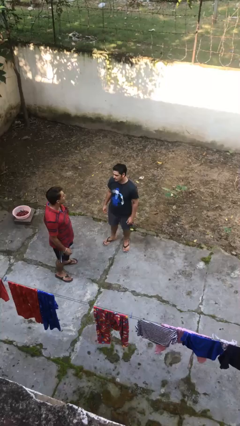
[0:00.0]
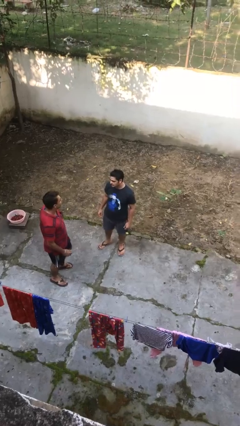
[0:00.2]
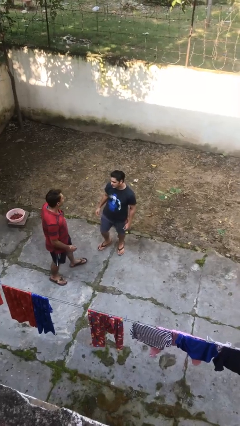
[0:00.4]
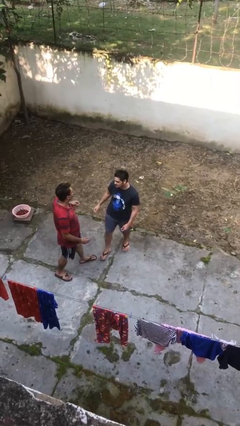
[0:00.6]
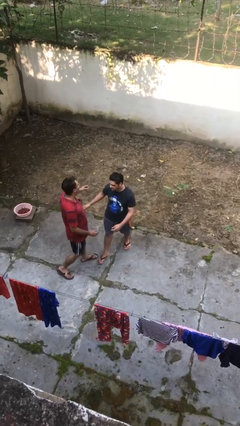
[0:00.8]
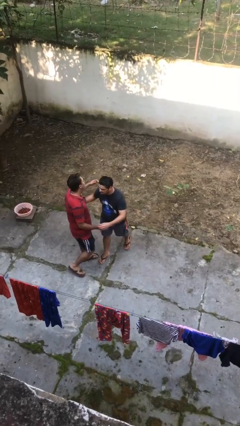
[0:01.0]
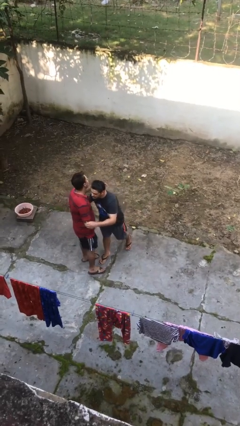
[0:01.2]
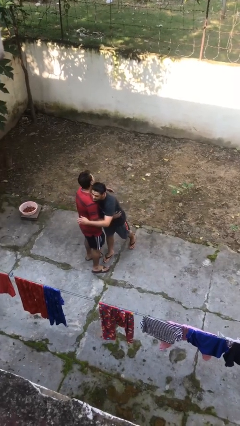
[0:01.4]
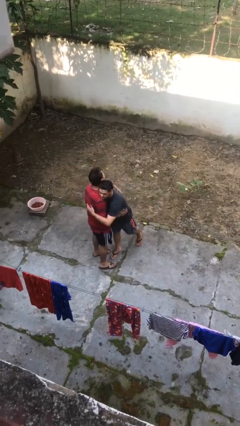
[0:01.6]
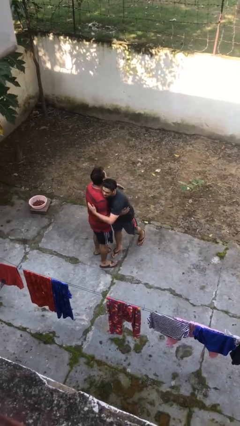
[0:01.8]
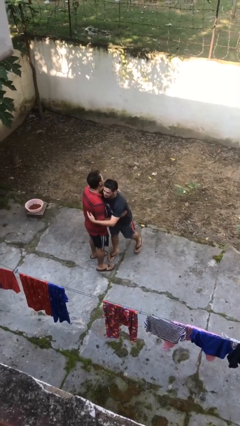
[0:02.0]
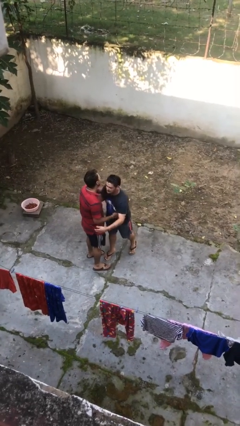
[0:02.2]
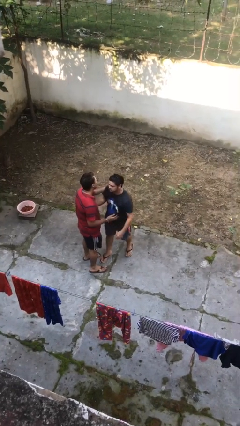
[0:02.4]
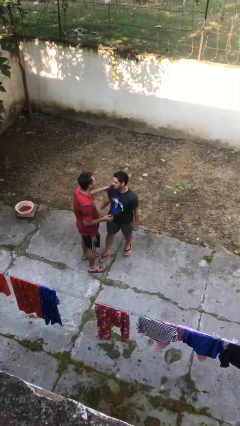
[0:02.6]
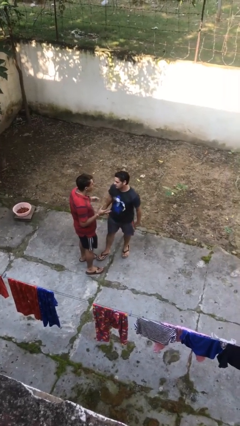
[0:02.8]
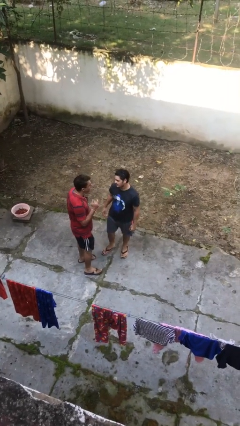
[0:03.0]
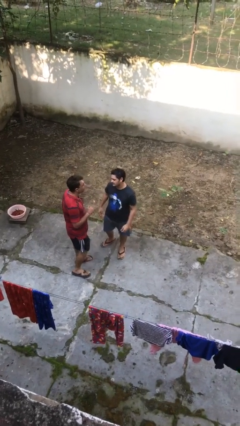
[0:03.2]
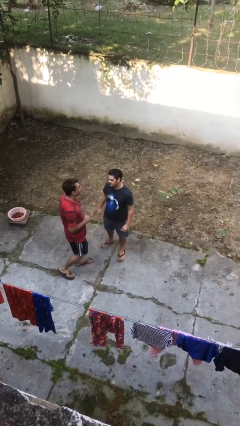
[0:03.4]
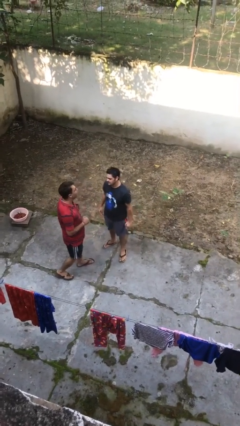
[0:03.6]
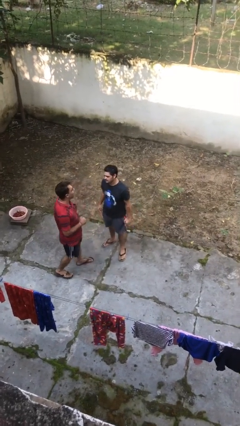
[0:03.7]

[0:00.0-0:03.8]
person embraces person

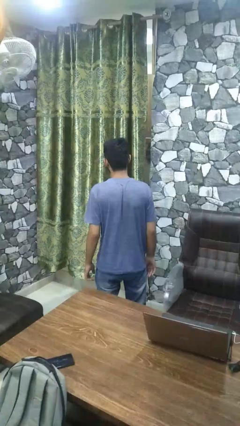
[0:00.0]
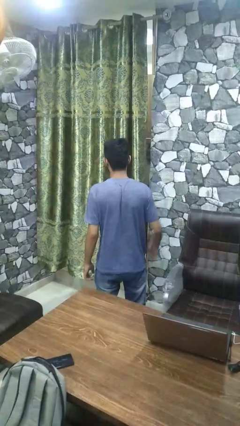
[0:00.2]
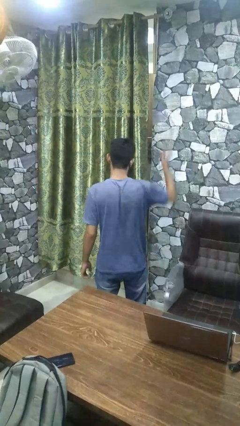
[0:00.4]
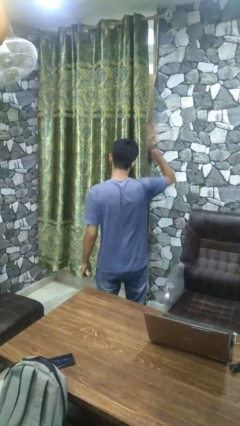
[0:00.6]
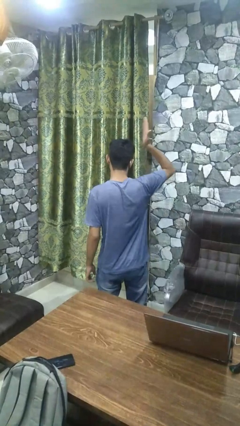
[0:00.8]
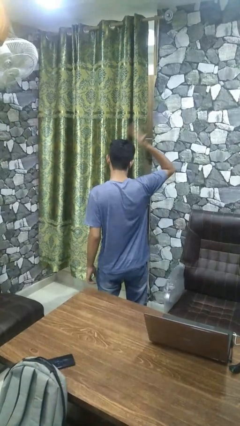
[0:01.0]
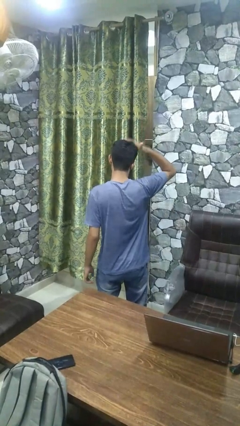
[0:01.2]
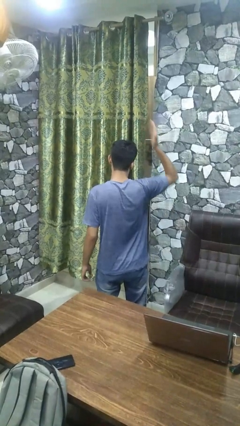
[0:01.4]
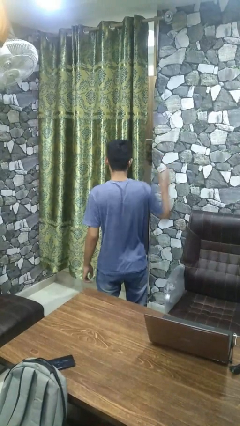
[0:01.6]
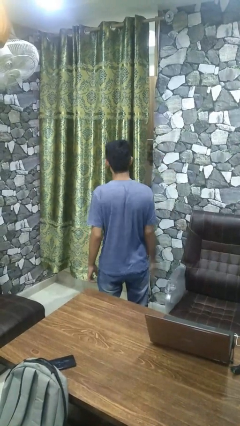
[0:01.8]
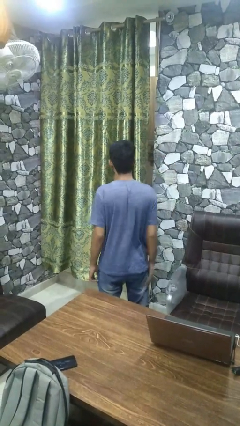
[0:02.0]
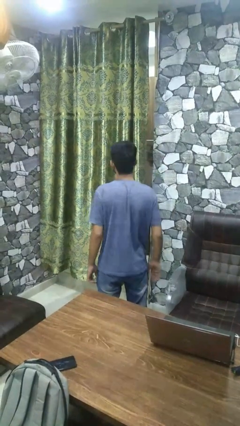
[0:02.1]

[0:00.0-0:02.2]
person pats head

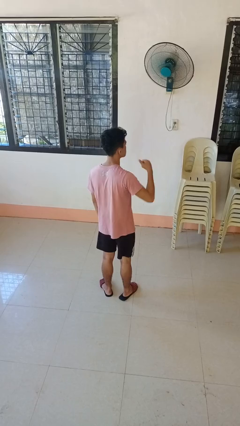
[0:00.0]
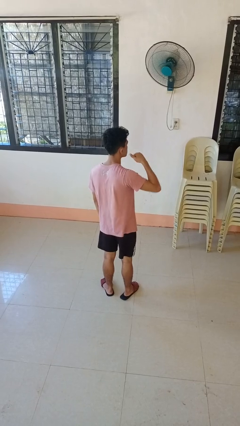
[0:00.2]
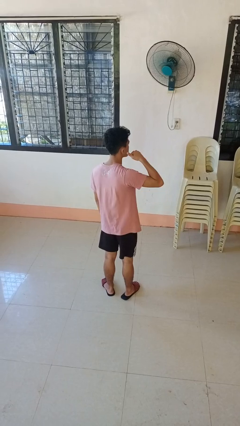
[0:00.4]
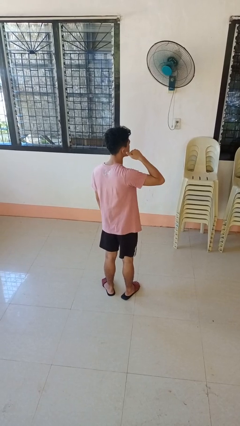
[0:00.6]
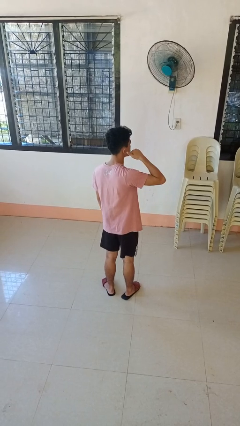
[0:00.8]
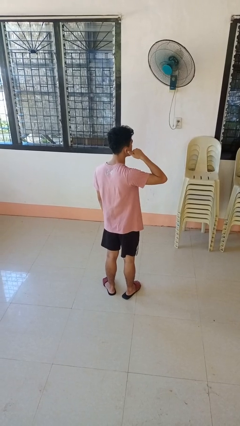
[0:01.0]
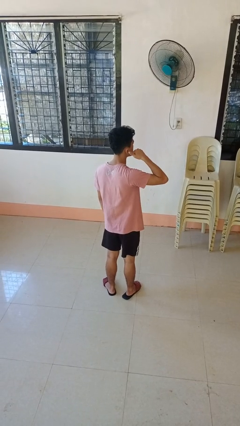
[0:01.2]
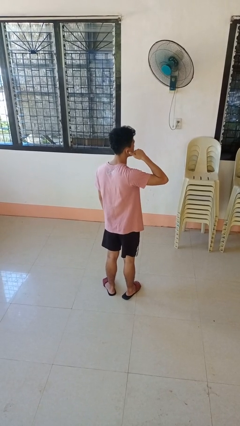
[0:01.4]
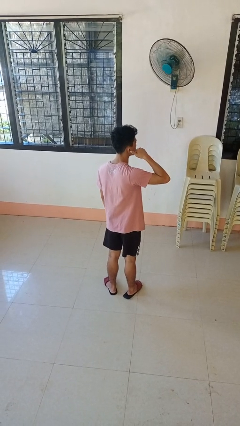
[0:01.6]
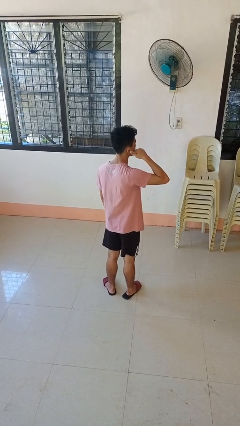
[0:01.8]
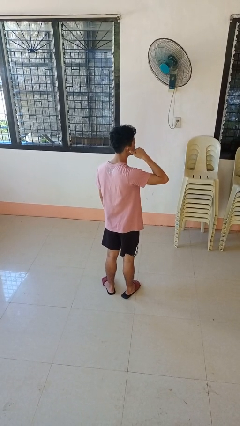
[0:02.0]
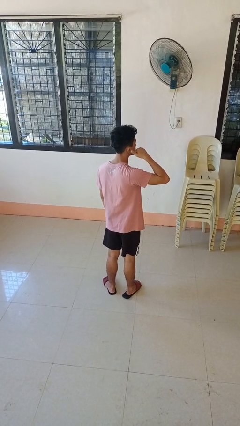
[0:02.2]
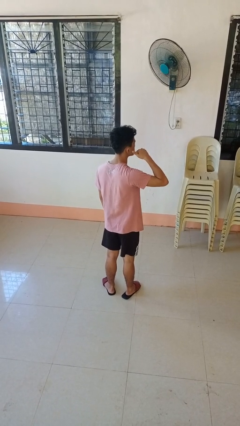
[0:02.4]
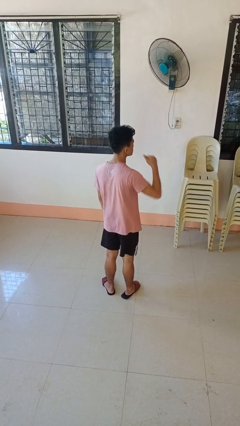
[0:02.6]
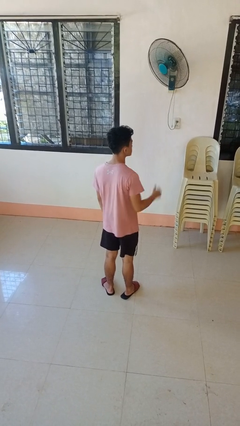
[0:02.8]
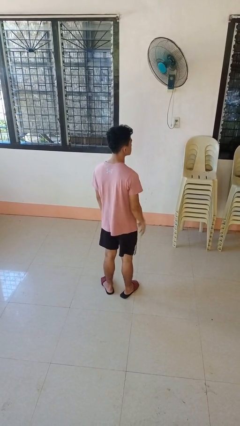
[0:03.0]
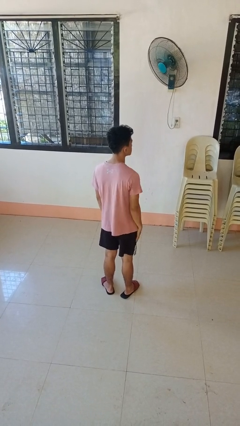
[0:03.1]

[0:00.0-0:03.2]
person gestures call me

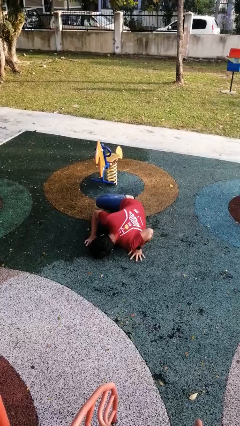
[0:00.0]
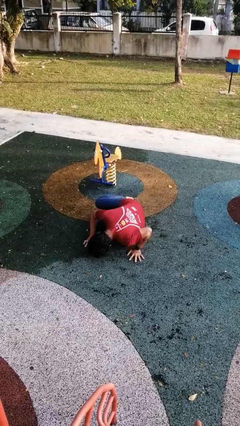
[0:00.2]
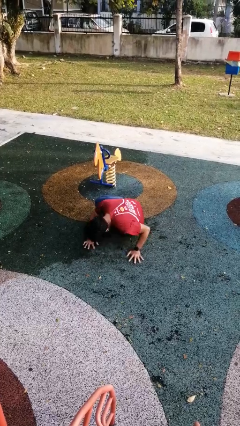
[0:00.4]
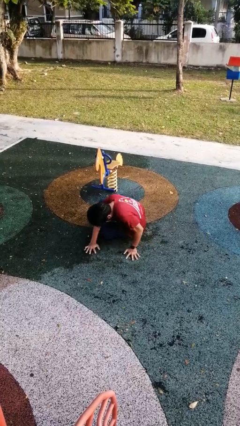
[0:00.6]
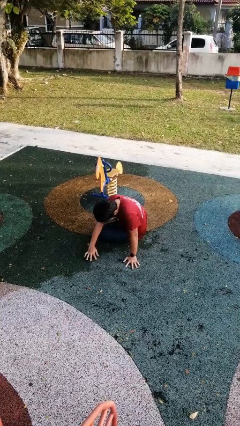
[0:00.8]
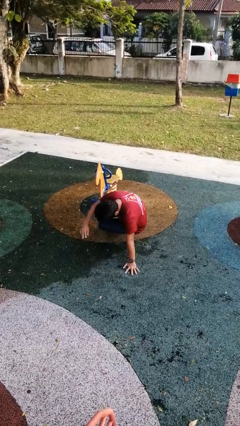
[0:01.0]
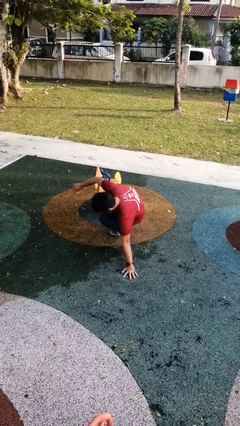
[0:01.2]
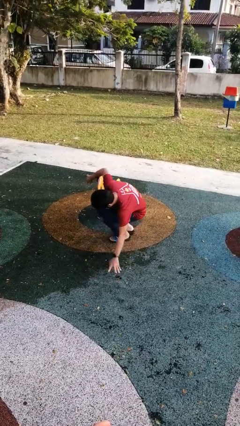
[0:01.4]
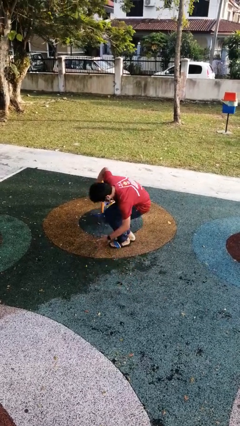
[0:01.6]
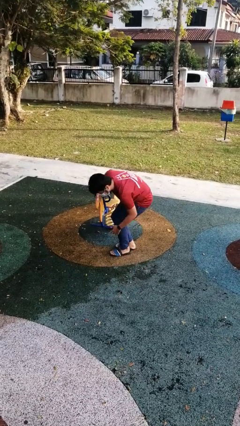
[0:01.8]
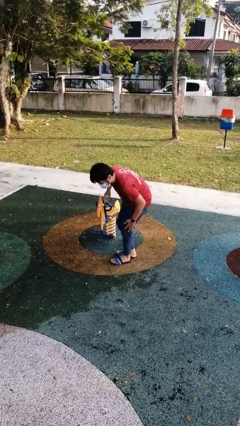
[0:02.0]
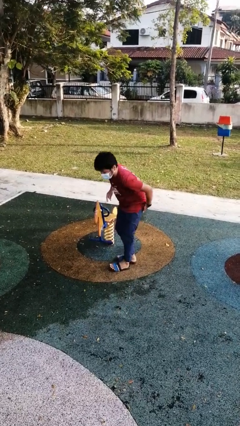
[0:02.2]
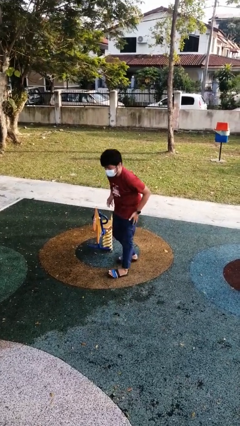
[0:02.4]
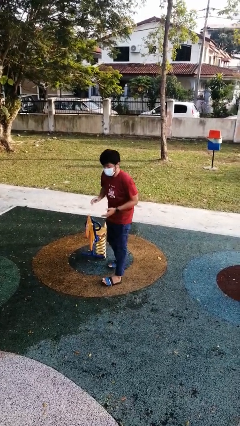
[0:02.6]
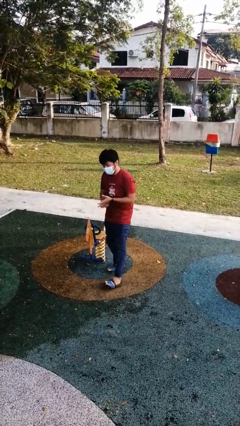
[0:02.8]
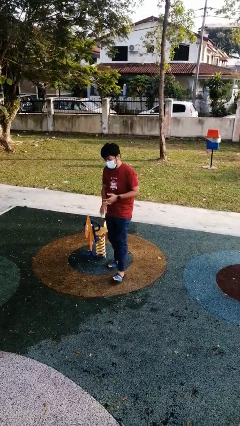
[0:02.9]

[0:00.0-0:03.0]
person stands up from floor

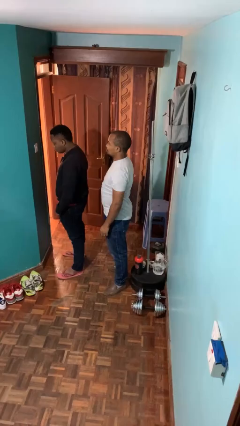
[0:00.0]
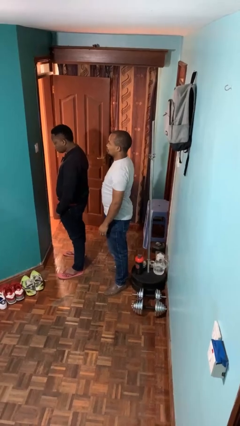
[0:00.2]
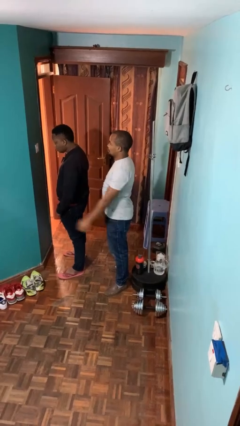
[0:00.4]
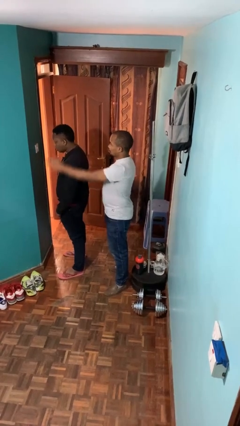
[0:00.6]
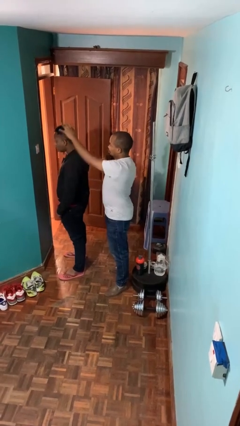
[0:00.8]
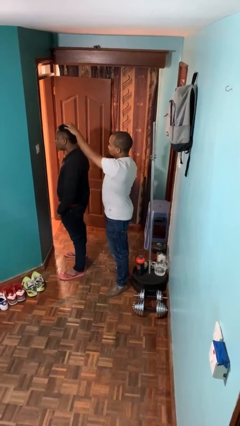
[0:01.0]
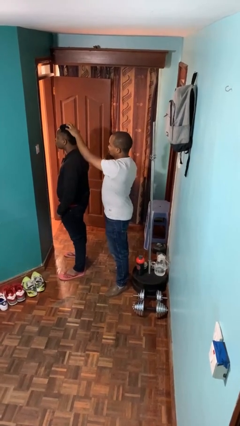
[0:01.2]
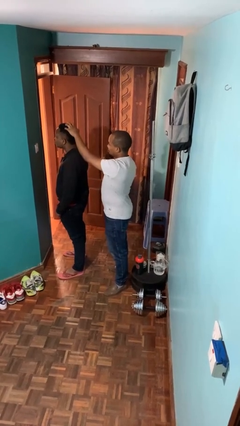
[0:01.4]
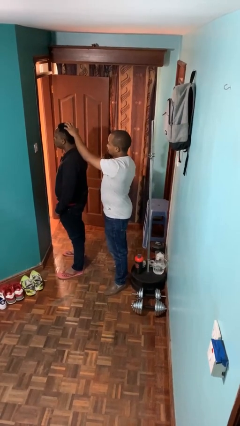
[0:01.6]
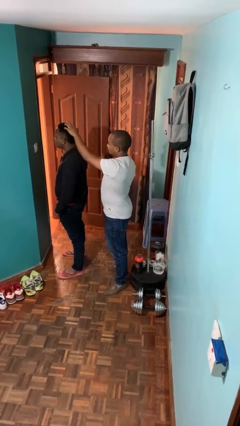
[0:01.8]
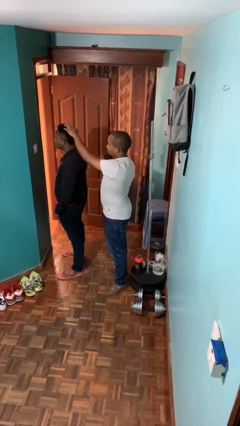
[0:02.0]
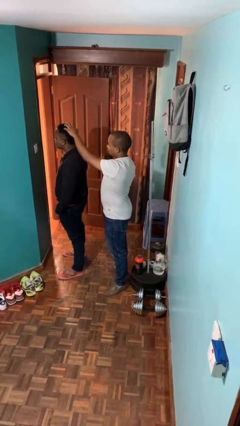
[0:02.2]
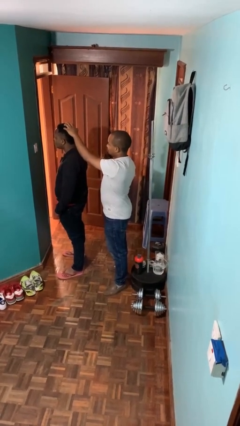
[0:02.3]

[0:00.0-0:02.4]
person grabs person by hair

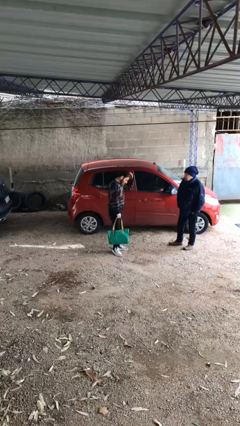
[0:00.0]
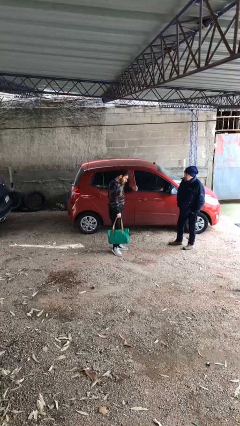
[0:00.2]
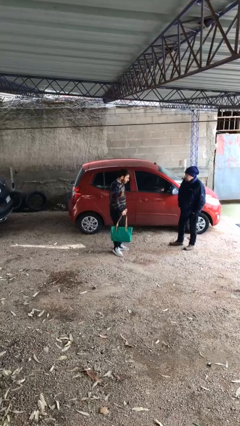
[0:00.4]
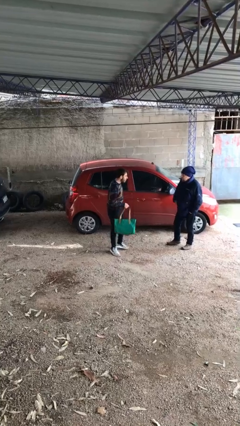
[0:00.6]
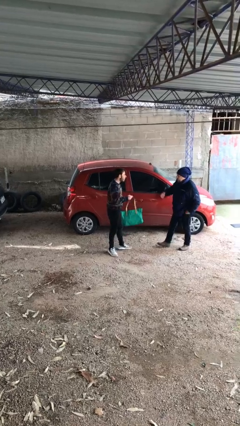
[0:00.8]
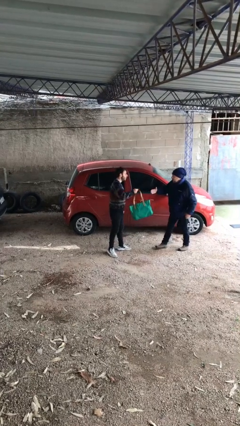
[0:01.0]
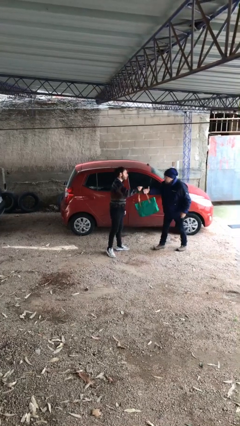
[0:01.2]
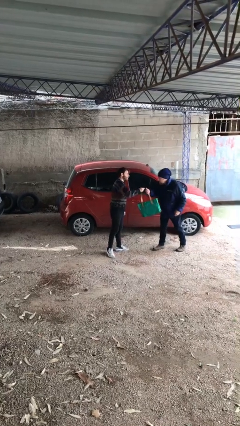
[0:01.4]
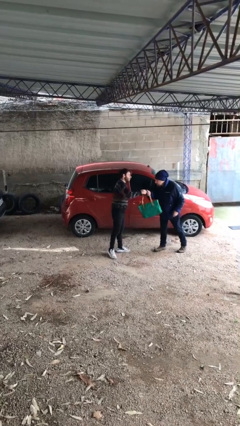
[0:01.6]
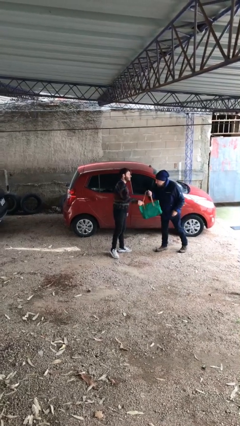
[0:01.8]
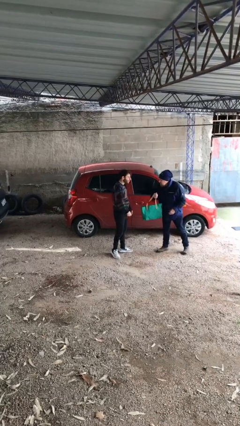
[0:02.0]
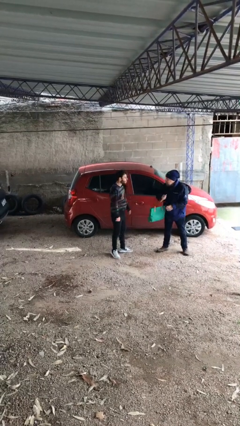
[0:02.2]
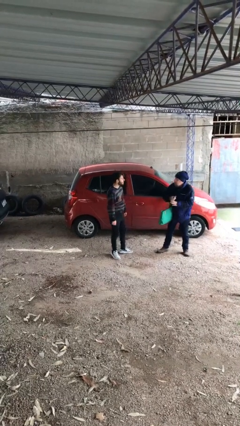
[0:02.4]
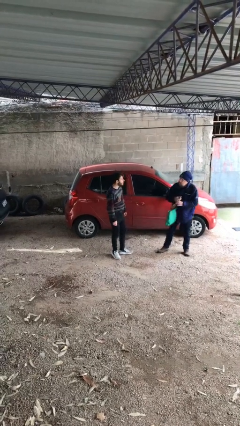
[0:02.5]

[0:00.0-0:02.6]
person transfers object to person
